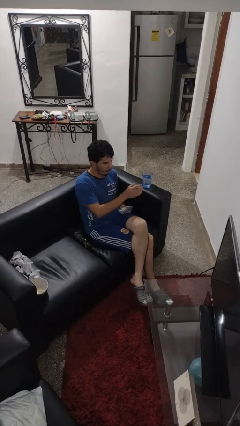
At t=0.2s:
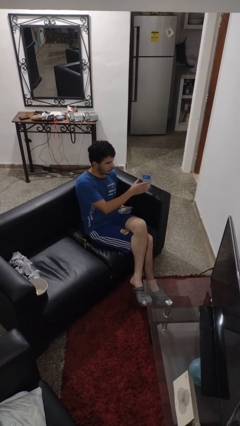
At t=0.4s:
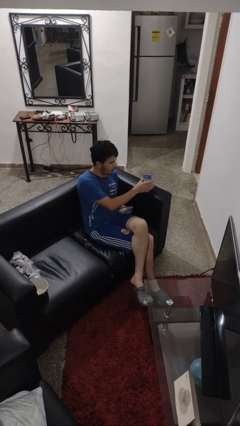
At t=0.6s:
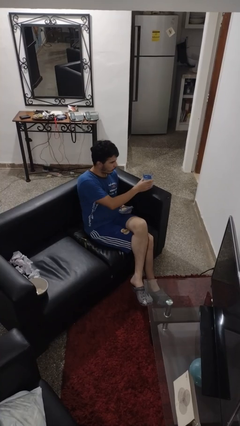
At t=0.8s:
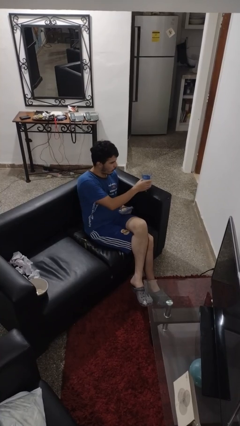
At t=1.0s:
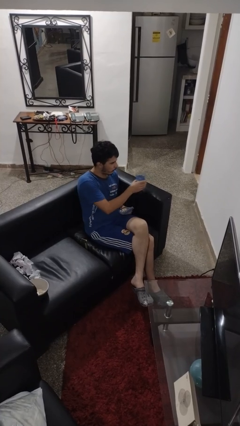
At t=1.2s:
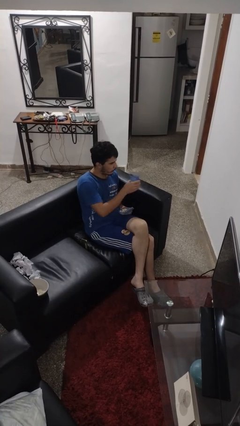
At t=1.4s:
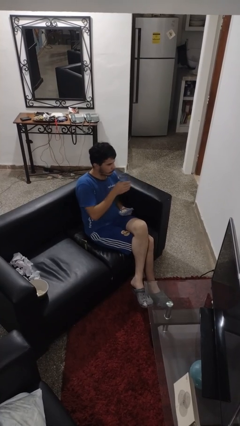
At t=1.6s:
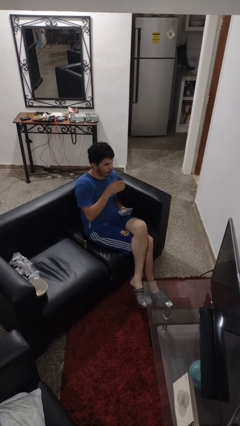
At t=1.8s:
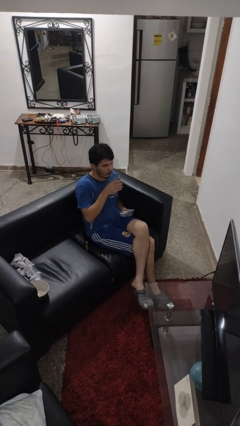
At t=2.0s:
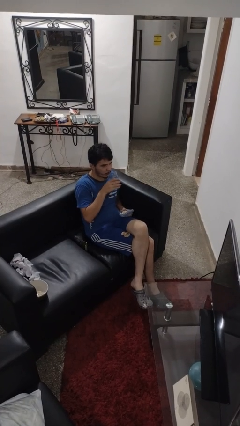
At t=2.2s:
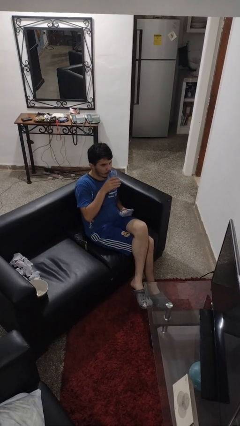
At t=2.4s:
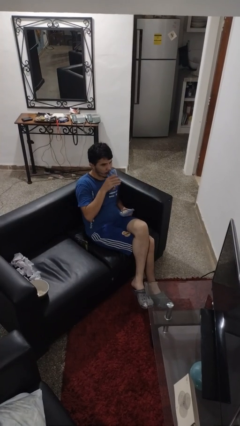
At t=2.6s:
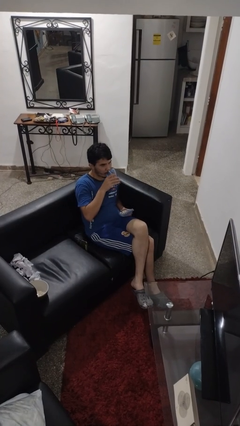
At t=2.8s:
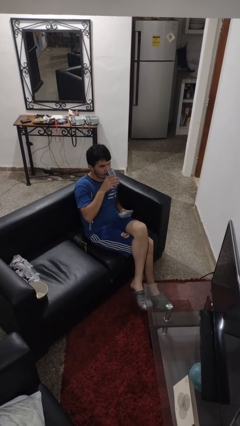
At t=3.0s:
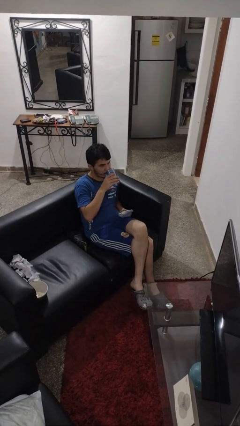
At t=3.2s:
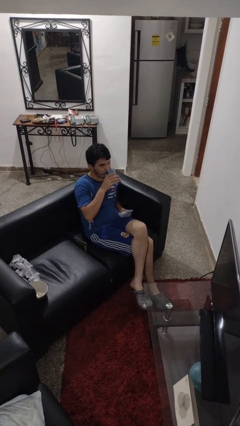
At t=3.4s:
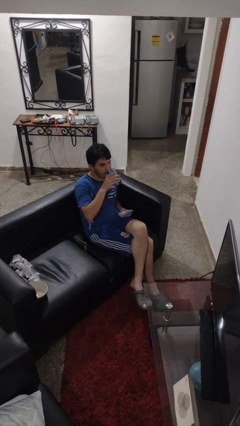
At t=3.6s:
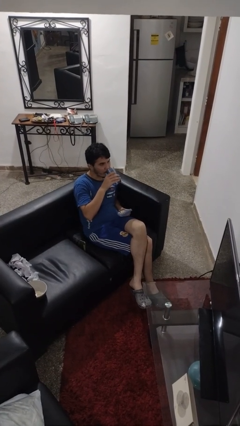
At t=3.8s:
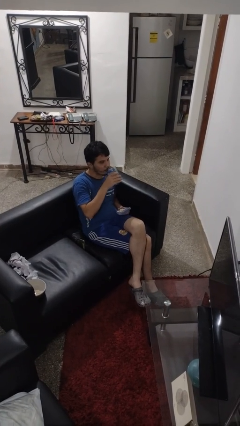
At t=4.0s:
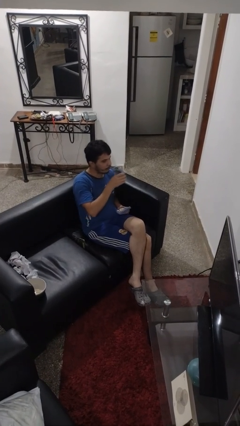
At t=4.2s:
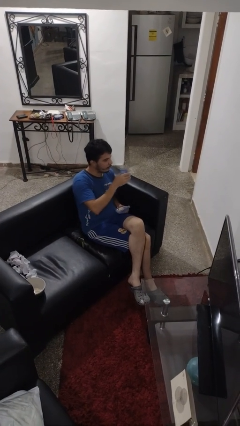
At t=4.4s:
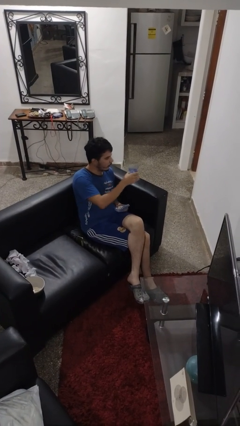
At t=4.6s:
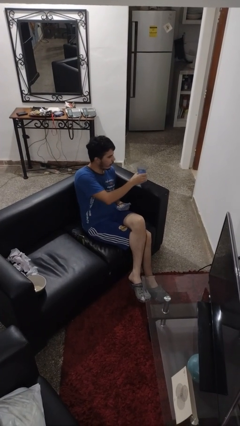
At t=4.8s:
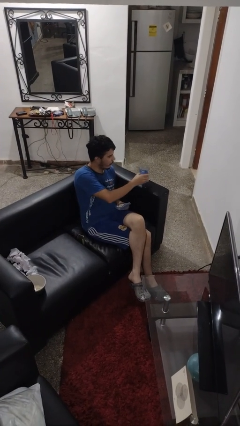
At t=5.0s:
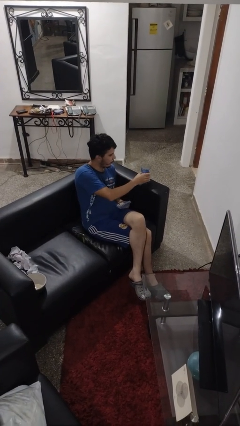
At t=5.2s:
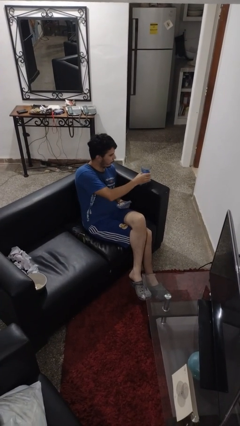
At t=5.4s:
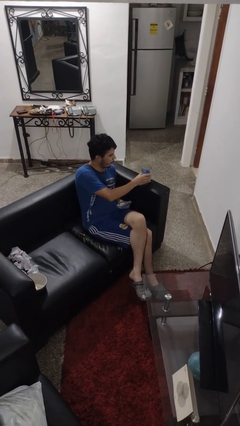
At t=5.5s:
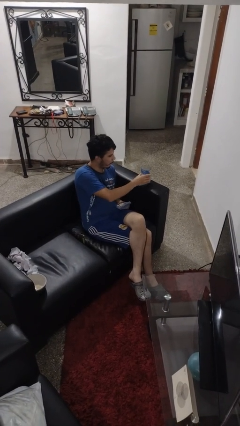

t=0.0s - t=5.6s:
person drinks from cup

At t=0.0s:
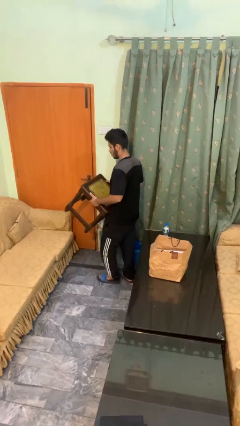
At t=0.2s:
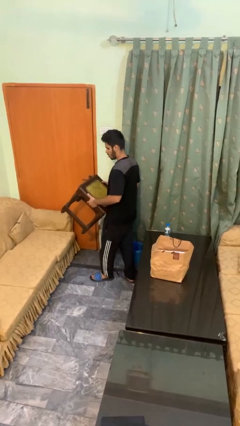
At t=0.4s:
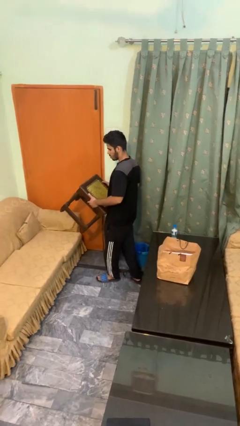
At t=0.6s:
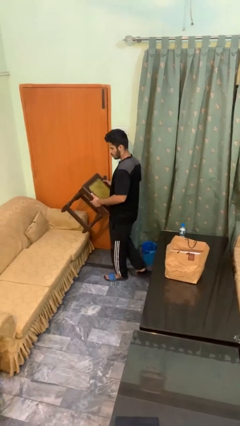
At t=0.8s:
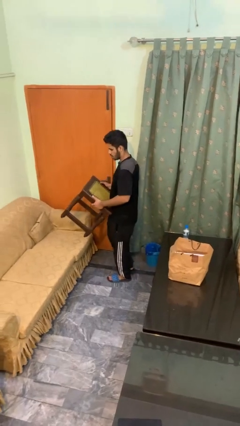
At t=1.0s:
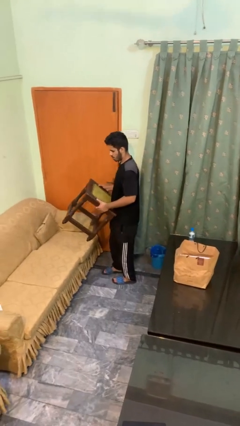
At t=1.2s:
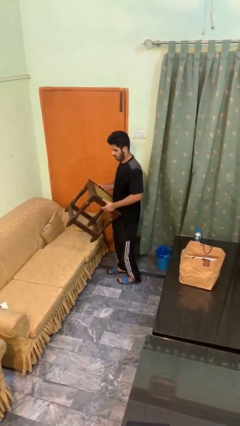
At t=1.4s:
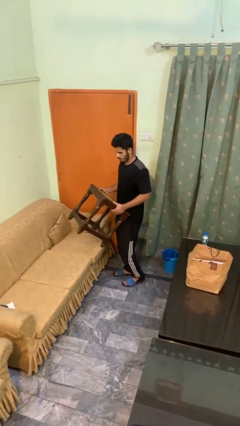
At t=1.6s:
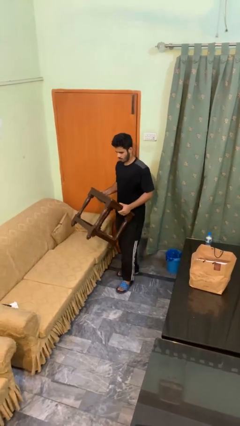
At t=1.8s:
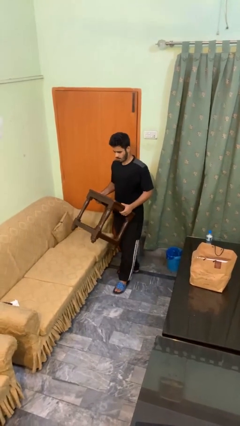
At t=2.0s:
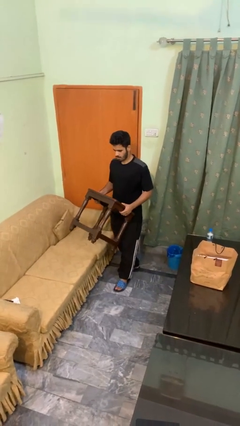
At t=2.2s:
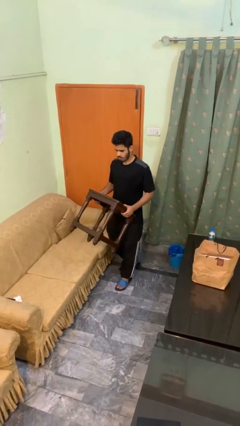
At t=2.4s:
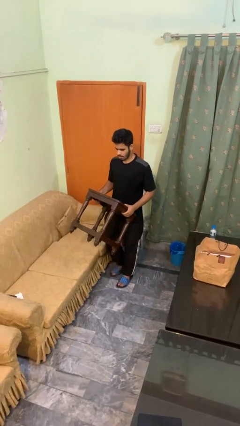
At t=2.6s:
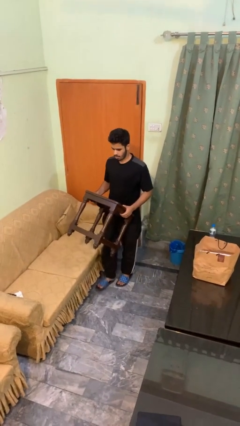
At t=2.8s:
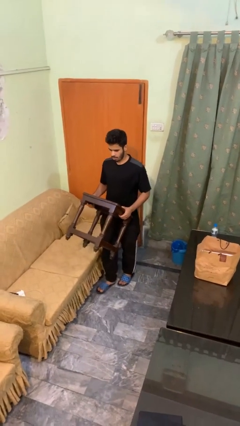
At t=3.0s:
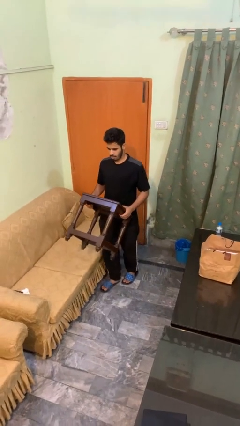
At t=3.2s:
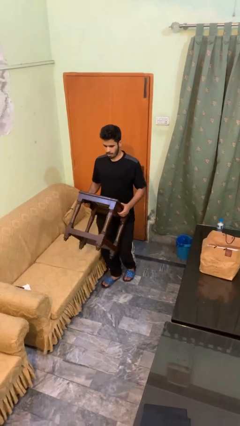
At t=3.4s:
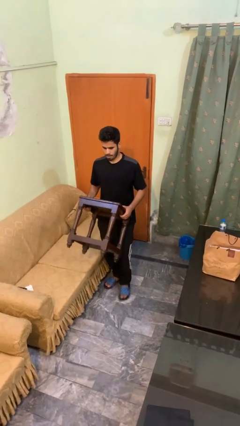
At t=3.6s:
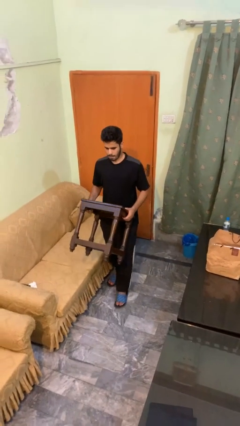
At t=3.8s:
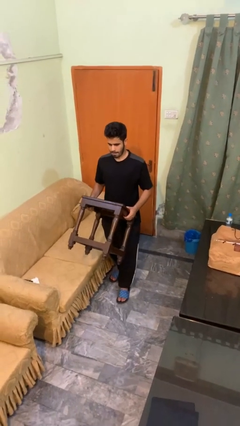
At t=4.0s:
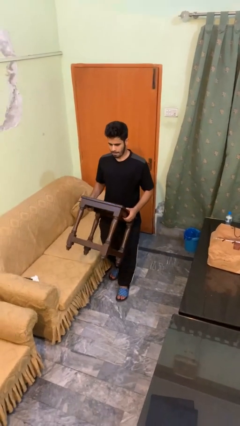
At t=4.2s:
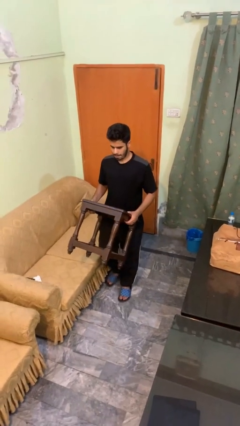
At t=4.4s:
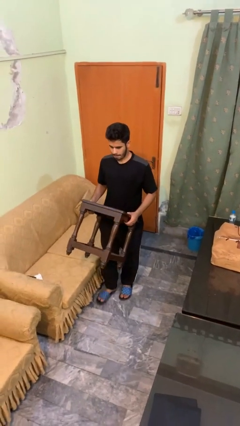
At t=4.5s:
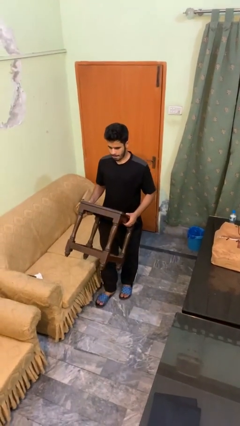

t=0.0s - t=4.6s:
person carries furniture

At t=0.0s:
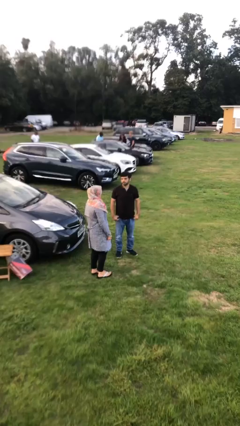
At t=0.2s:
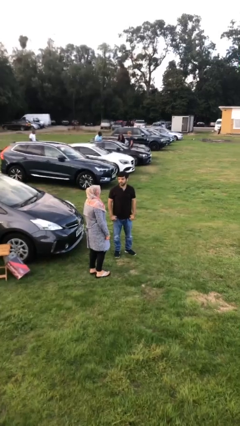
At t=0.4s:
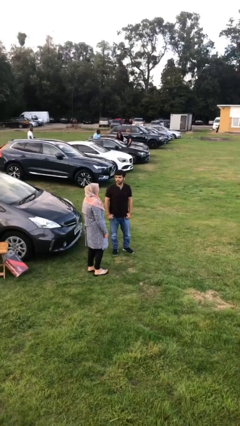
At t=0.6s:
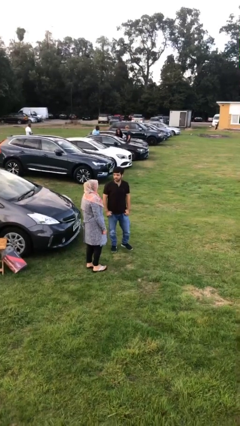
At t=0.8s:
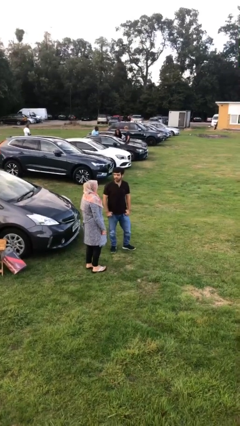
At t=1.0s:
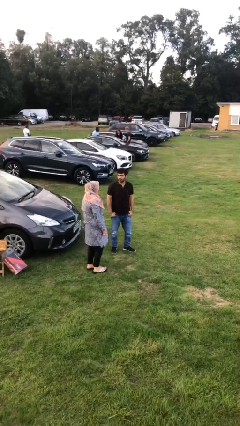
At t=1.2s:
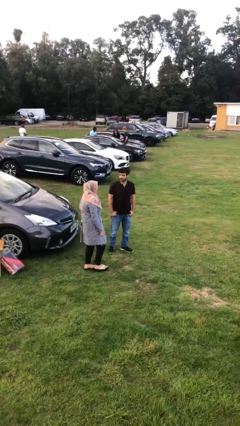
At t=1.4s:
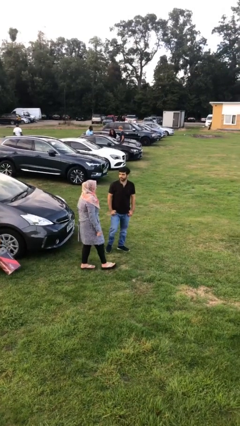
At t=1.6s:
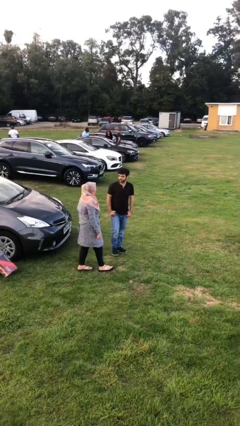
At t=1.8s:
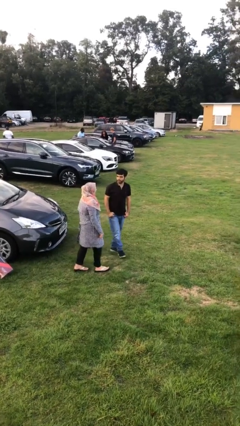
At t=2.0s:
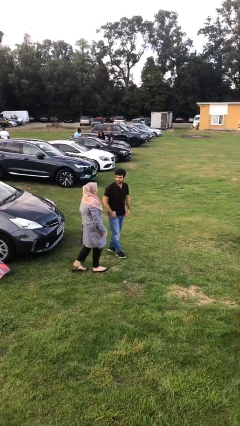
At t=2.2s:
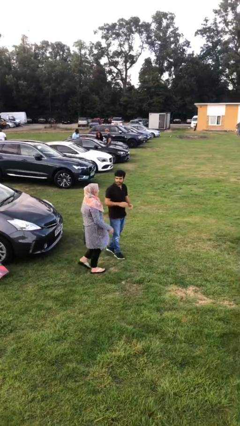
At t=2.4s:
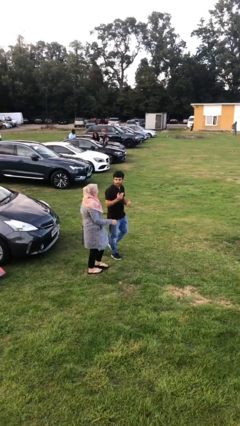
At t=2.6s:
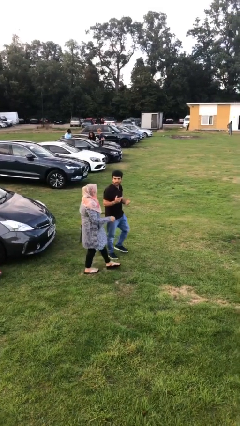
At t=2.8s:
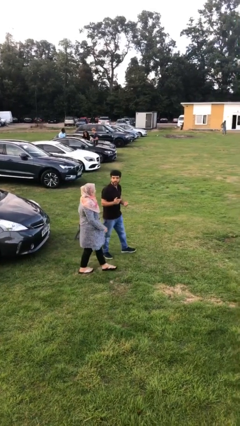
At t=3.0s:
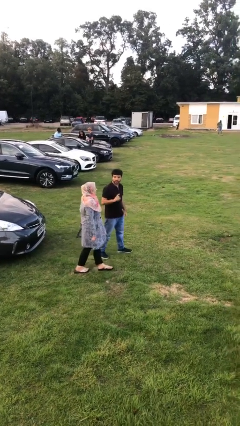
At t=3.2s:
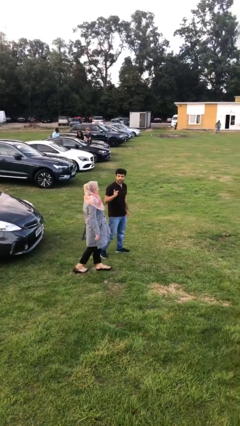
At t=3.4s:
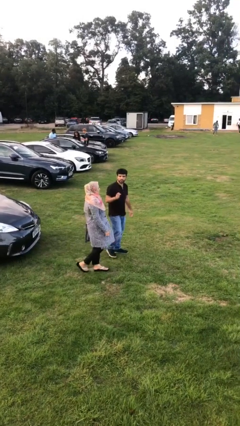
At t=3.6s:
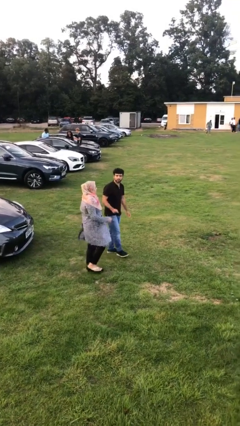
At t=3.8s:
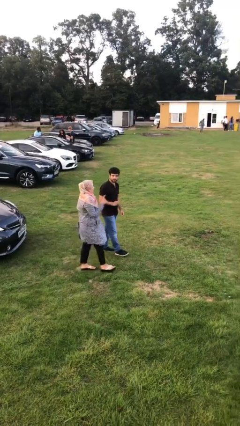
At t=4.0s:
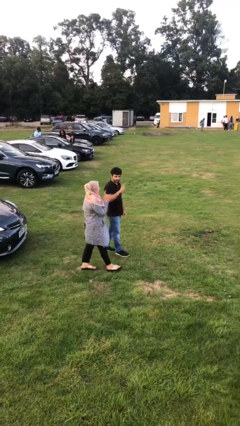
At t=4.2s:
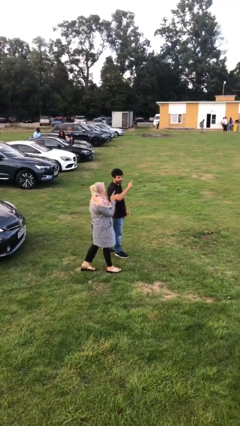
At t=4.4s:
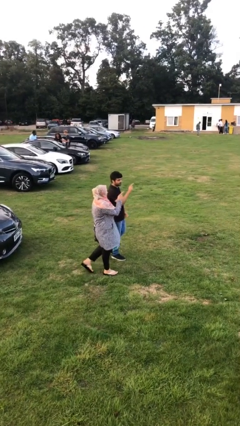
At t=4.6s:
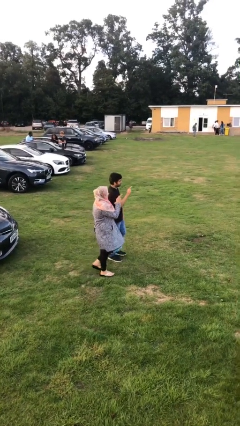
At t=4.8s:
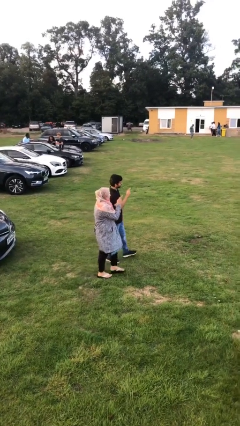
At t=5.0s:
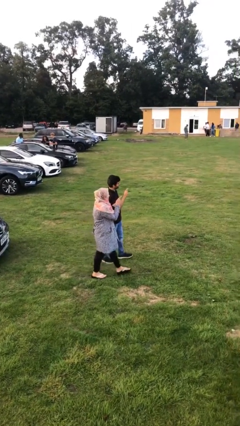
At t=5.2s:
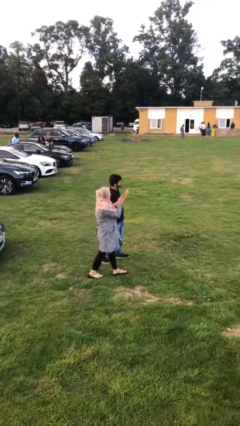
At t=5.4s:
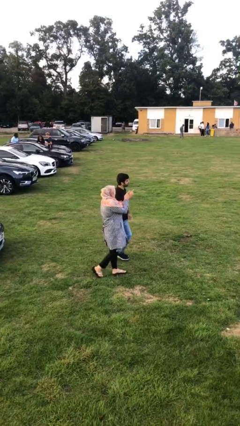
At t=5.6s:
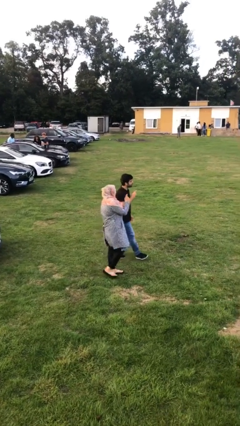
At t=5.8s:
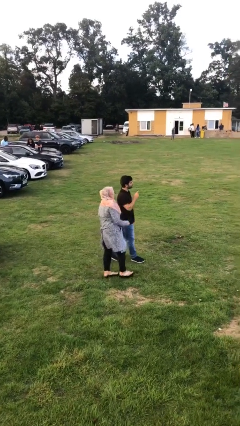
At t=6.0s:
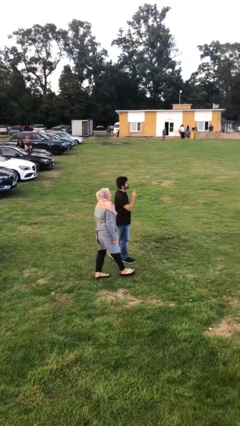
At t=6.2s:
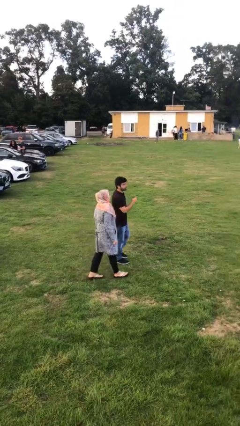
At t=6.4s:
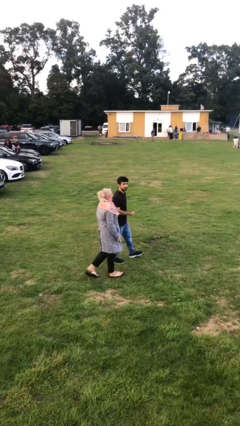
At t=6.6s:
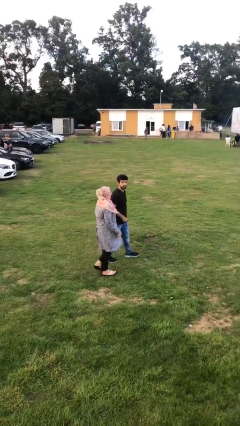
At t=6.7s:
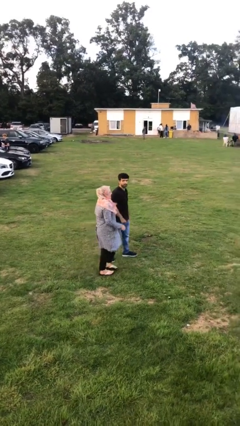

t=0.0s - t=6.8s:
person talks to person

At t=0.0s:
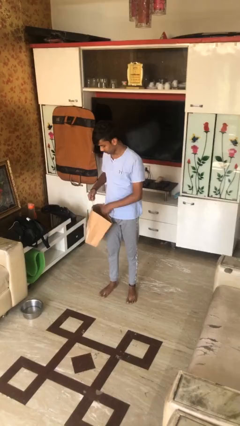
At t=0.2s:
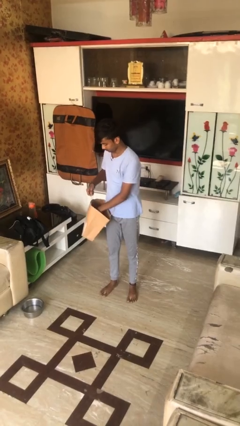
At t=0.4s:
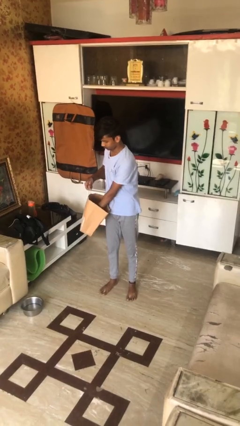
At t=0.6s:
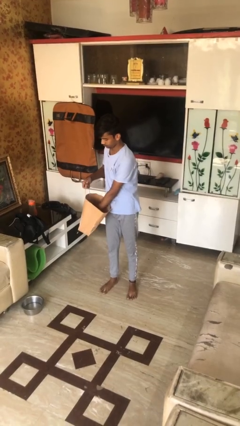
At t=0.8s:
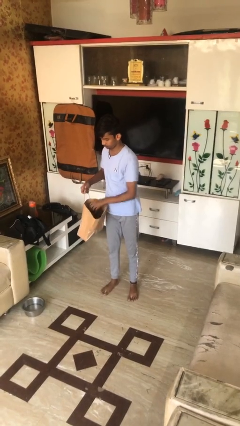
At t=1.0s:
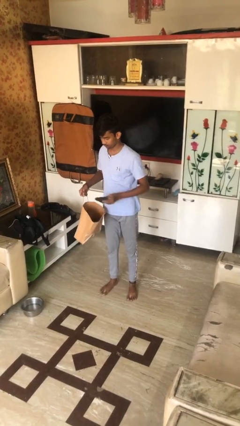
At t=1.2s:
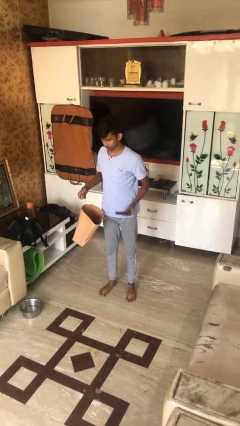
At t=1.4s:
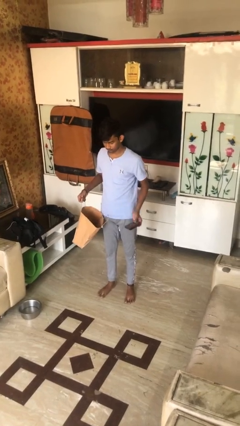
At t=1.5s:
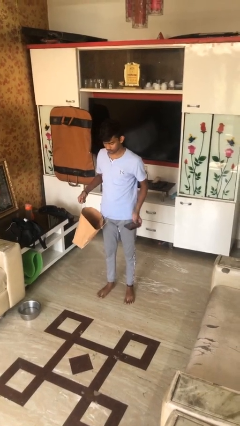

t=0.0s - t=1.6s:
person takes object from bag
